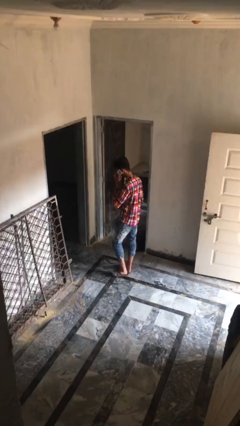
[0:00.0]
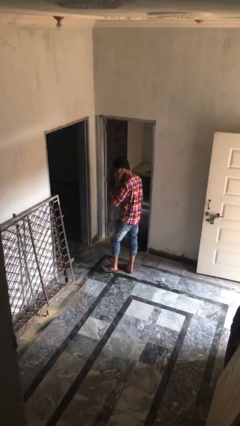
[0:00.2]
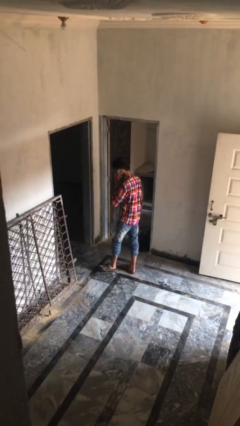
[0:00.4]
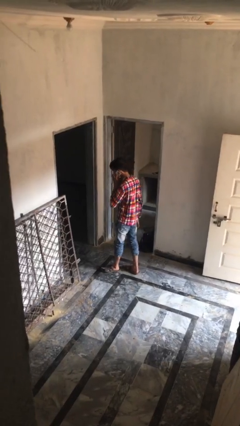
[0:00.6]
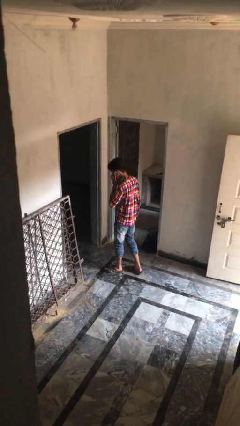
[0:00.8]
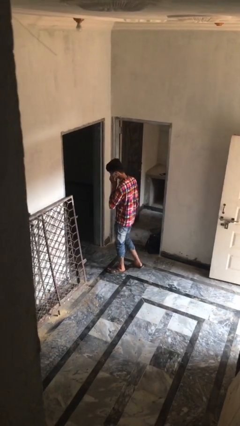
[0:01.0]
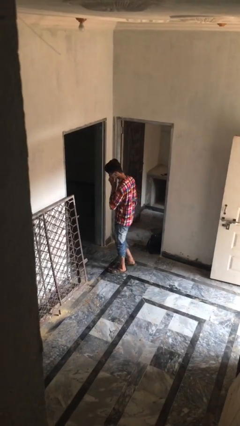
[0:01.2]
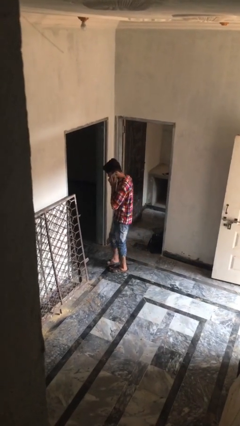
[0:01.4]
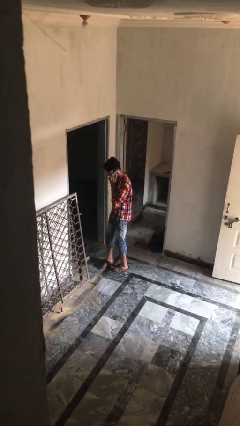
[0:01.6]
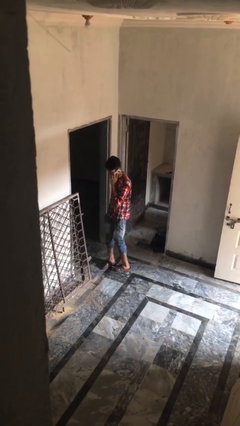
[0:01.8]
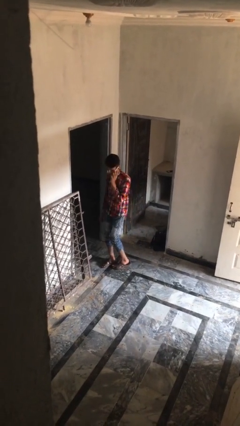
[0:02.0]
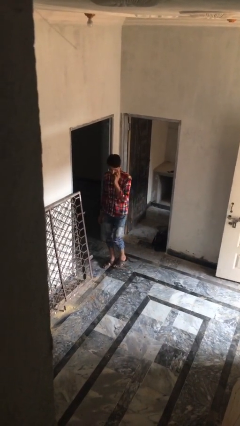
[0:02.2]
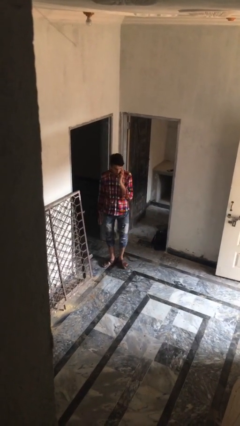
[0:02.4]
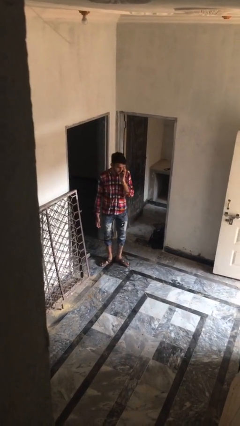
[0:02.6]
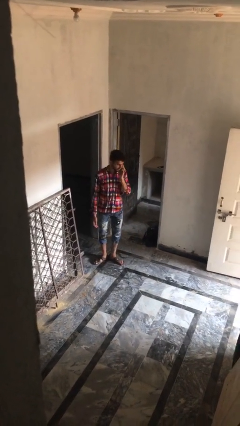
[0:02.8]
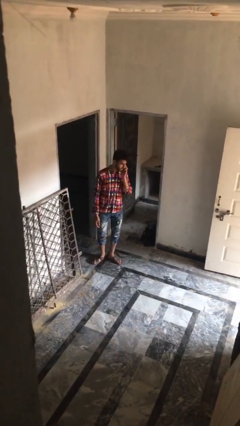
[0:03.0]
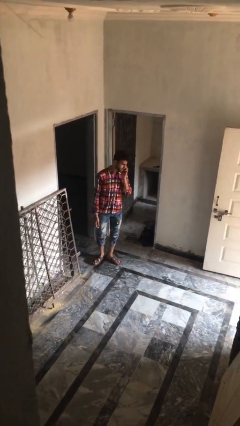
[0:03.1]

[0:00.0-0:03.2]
person talks on phone

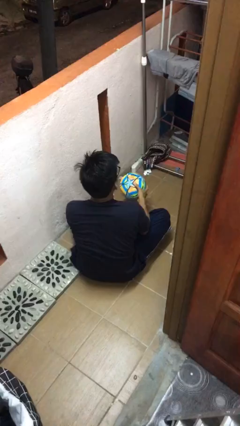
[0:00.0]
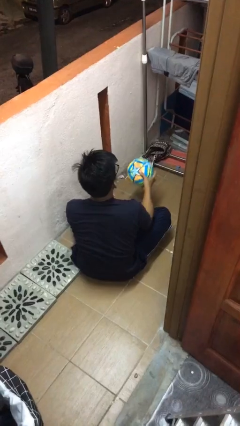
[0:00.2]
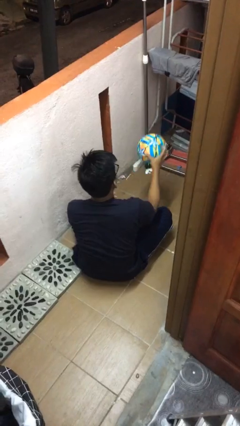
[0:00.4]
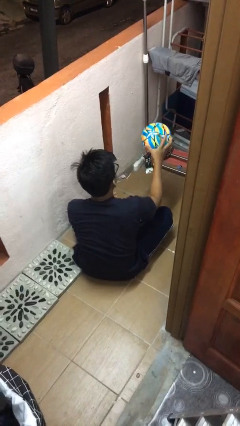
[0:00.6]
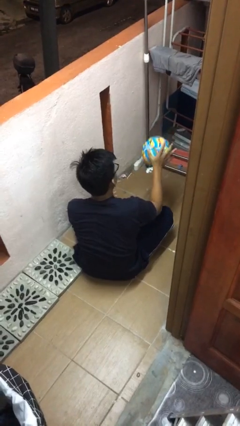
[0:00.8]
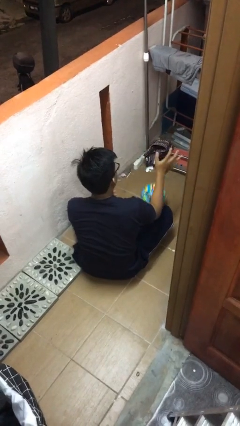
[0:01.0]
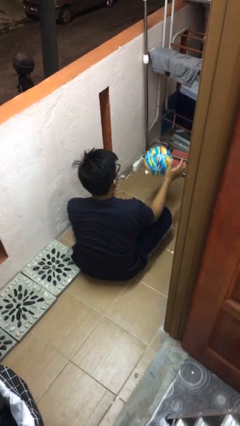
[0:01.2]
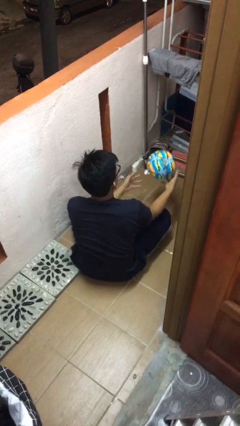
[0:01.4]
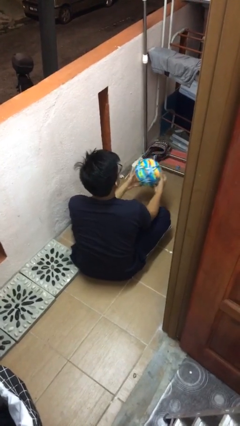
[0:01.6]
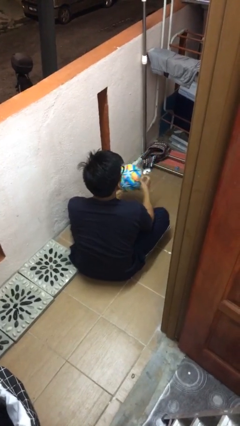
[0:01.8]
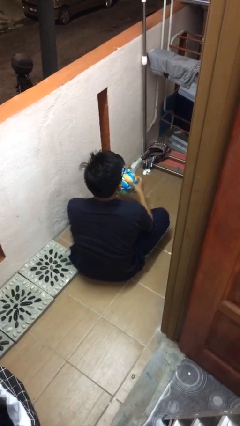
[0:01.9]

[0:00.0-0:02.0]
person bounces ball on floor

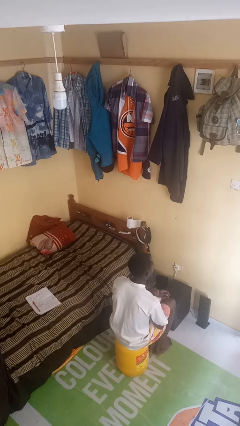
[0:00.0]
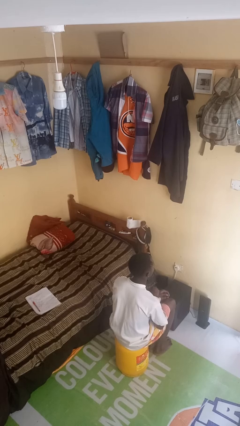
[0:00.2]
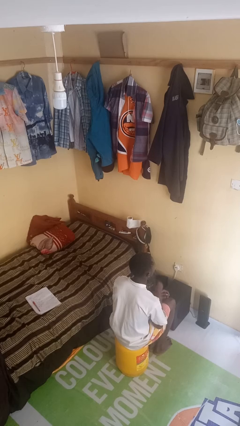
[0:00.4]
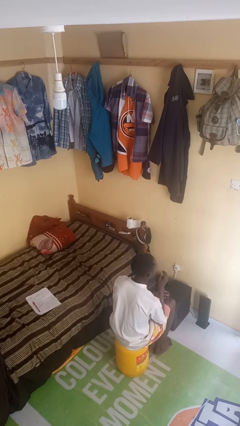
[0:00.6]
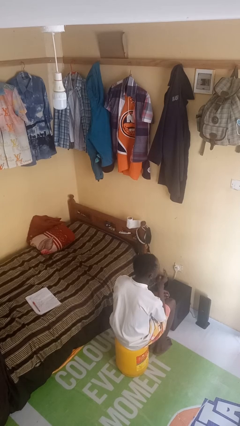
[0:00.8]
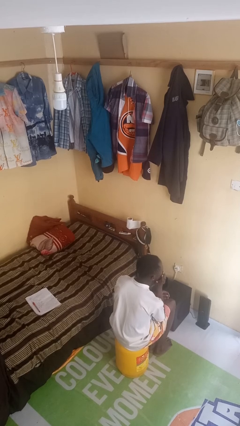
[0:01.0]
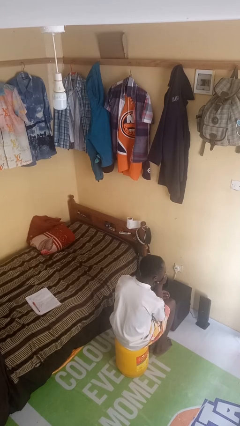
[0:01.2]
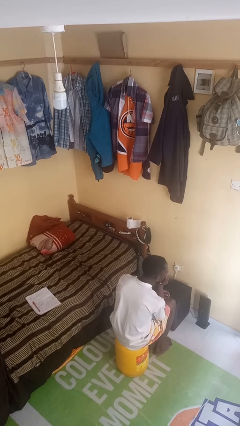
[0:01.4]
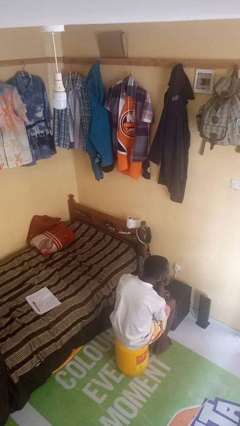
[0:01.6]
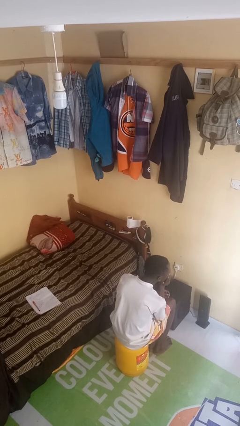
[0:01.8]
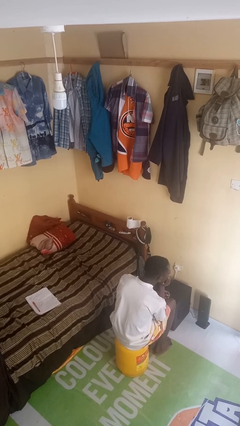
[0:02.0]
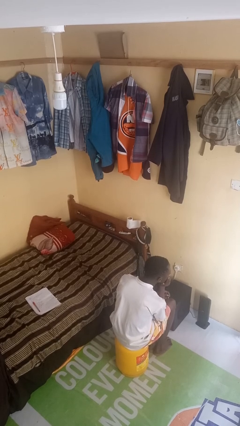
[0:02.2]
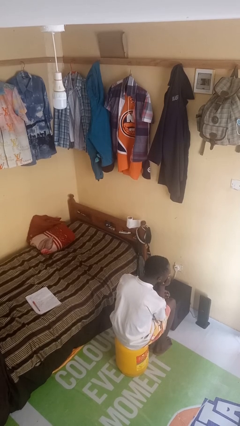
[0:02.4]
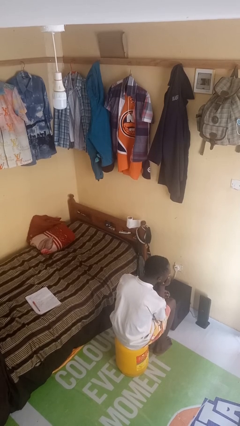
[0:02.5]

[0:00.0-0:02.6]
person strokes chin

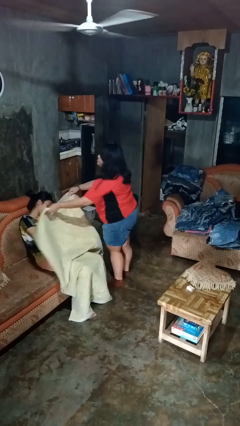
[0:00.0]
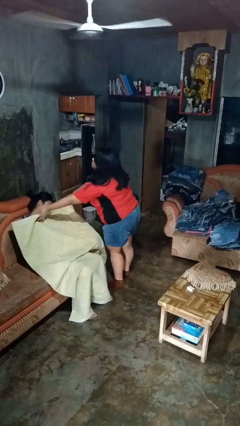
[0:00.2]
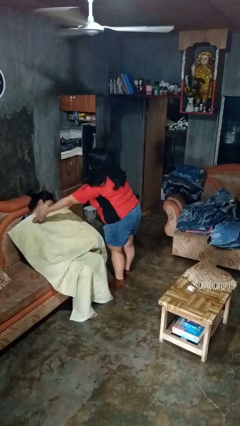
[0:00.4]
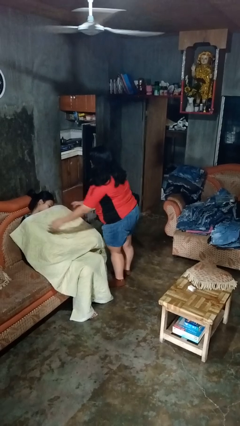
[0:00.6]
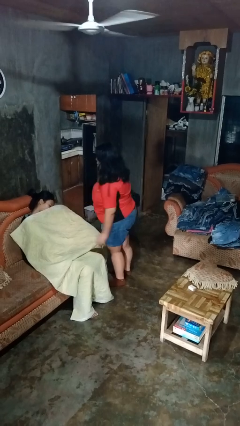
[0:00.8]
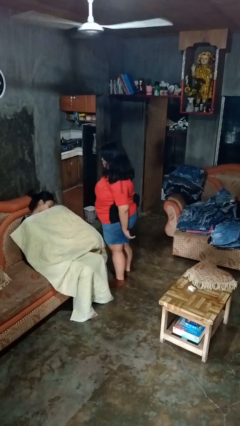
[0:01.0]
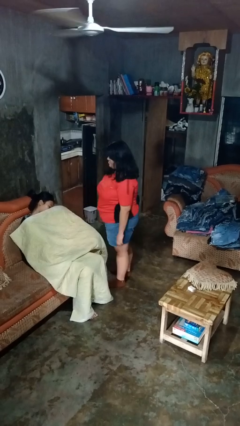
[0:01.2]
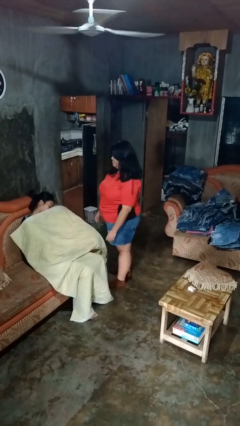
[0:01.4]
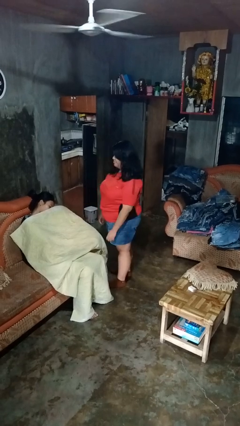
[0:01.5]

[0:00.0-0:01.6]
person covers friend with blanket

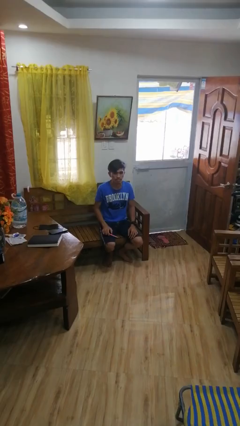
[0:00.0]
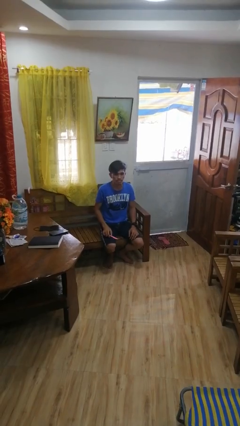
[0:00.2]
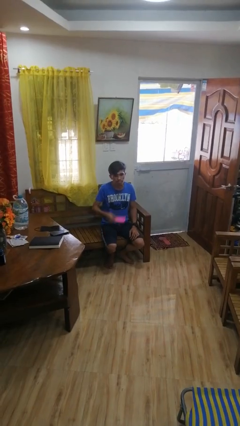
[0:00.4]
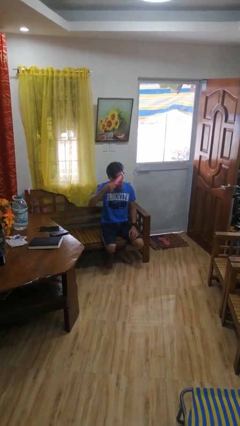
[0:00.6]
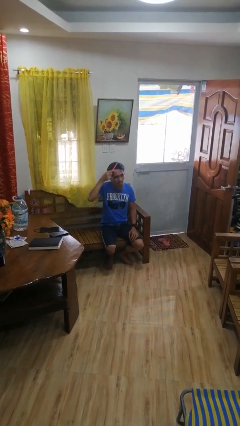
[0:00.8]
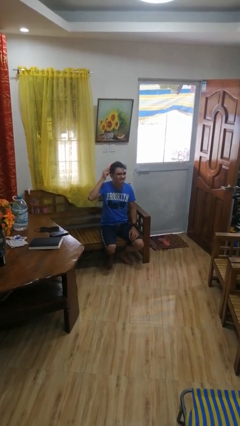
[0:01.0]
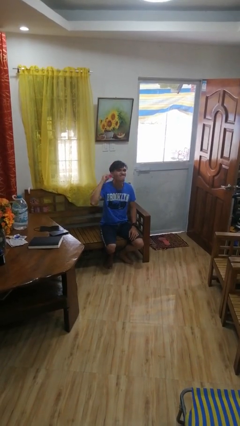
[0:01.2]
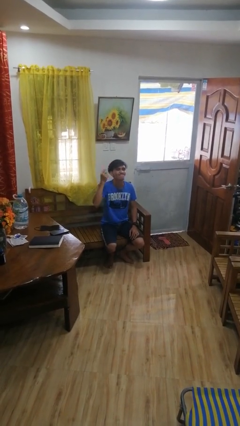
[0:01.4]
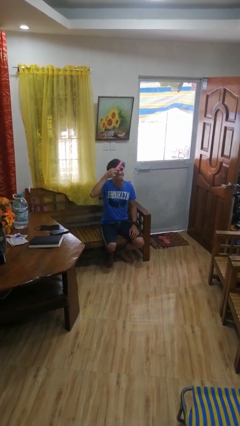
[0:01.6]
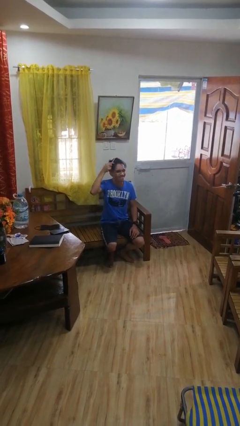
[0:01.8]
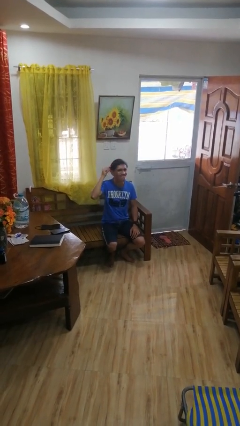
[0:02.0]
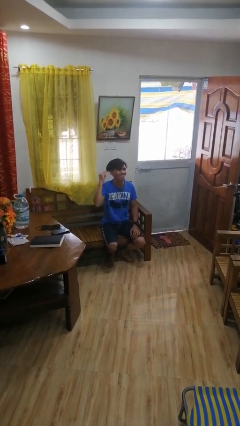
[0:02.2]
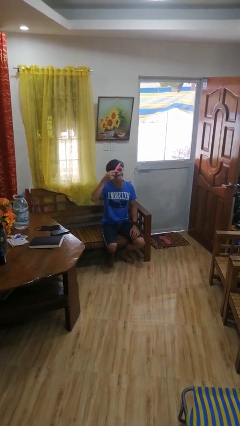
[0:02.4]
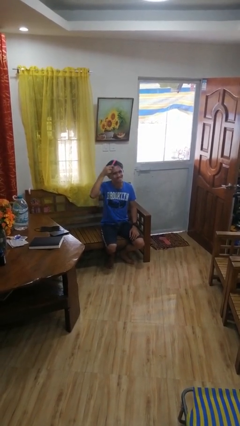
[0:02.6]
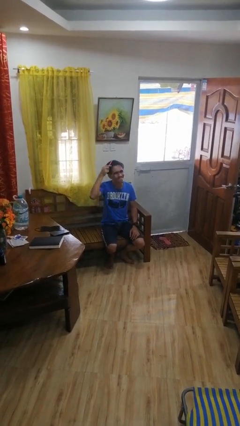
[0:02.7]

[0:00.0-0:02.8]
person brushes hair

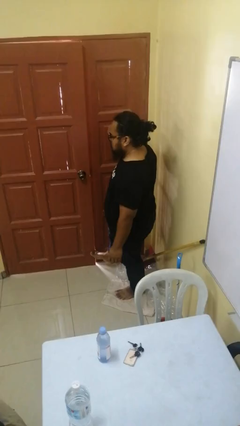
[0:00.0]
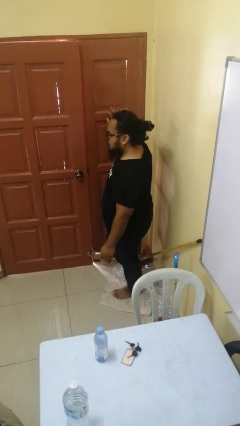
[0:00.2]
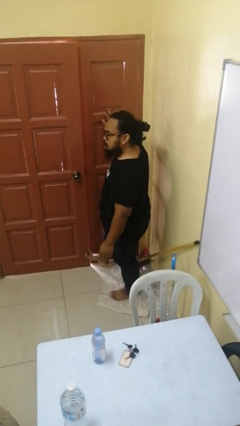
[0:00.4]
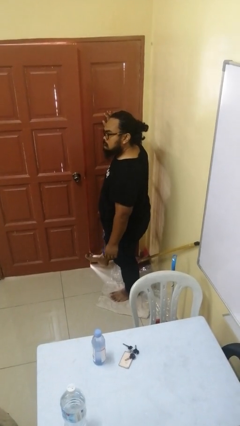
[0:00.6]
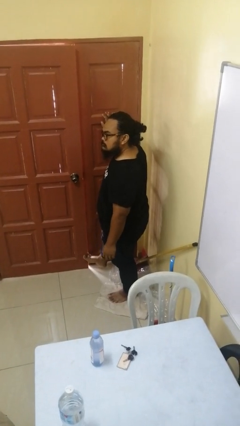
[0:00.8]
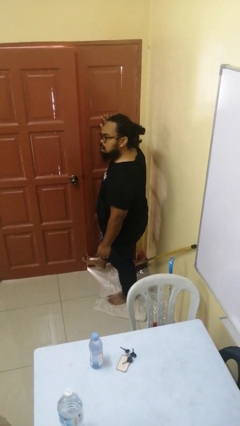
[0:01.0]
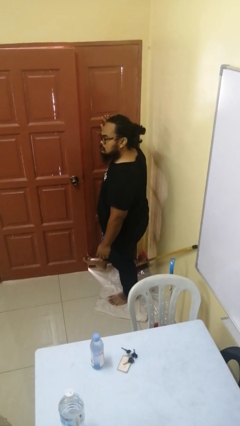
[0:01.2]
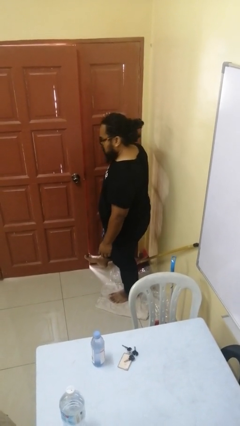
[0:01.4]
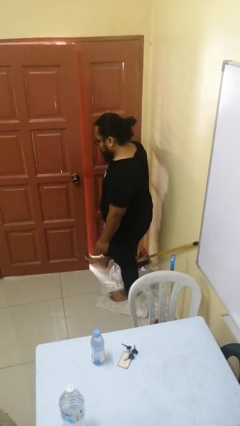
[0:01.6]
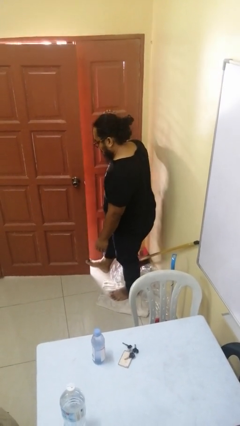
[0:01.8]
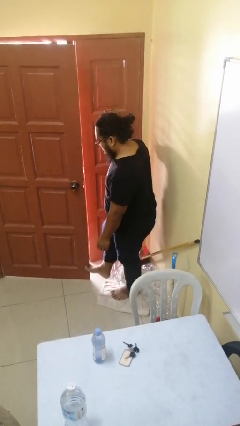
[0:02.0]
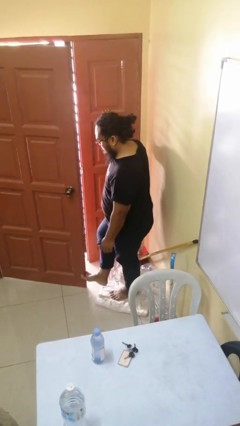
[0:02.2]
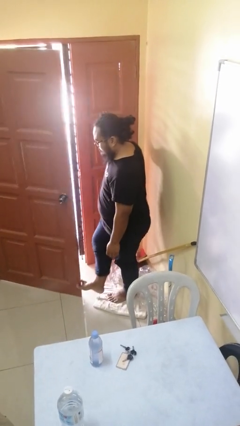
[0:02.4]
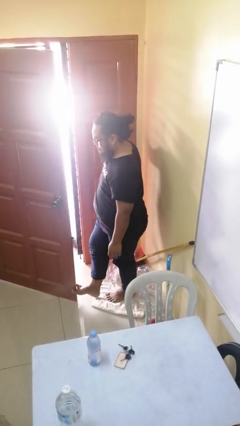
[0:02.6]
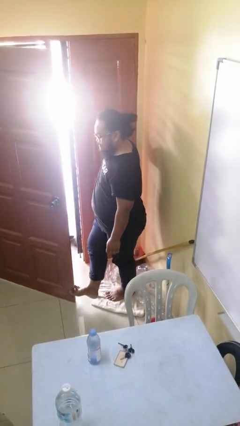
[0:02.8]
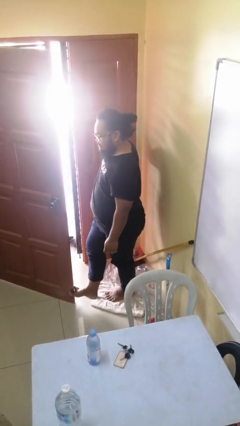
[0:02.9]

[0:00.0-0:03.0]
person opens facility door

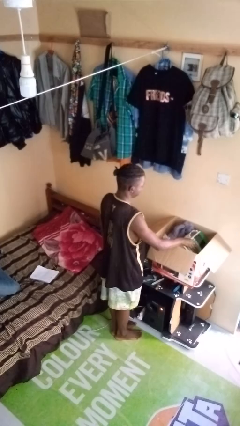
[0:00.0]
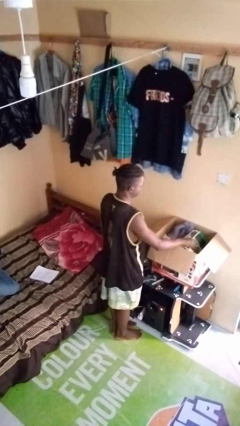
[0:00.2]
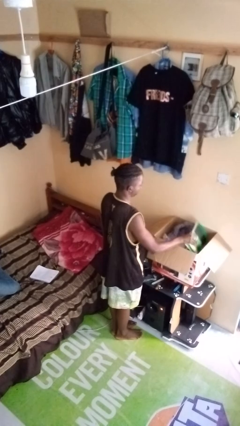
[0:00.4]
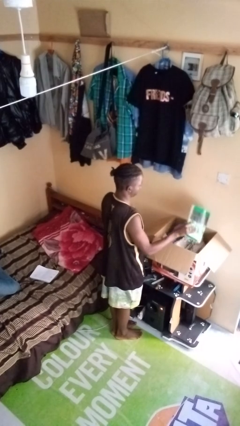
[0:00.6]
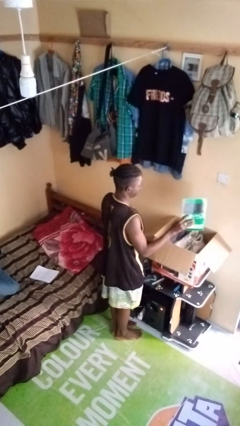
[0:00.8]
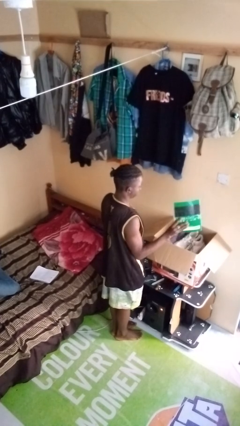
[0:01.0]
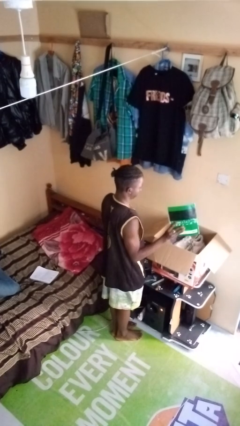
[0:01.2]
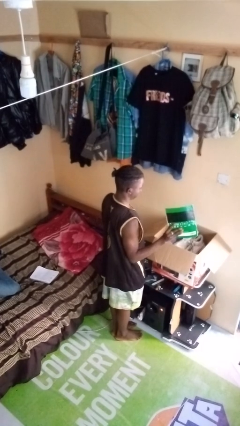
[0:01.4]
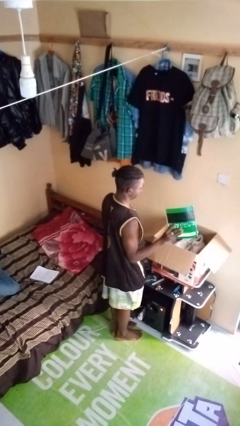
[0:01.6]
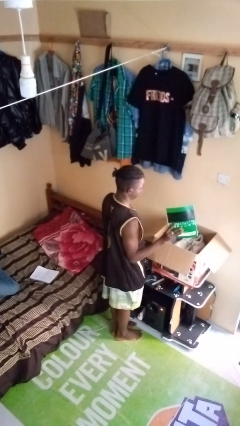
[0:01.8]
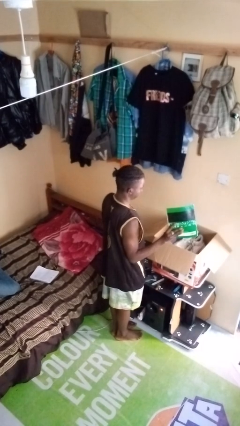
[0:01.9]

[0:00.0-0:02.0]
person takes object from box
